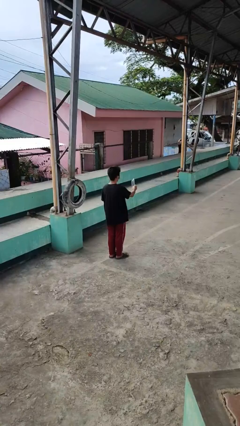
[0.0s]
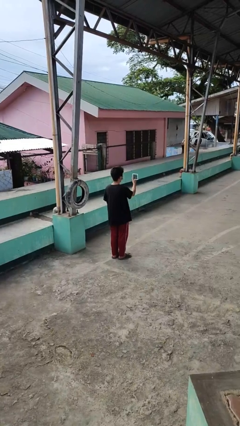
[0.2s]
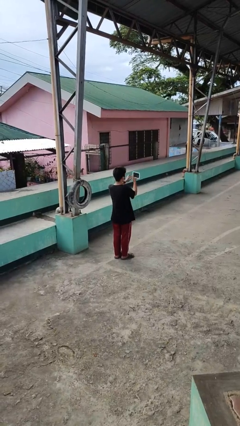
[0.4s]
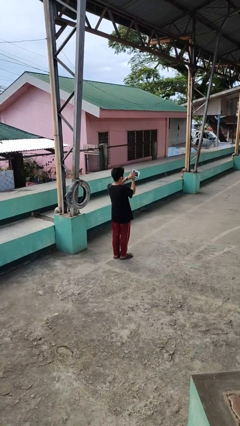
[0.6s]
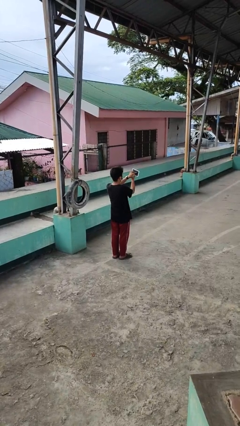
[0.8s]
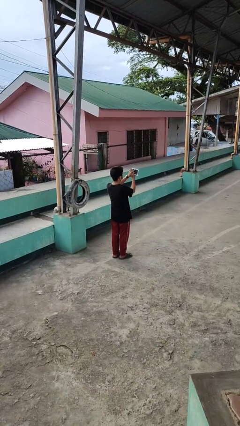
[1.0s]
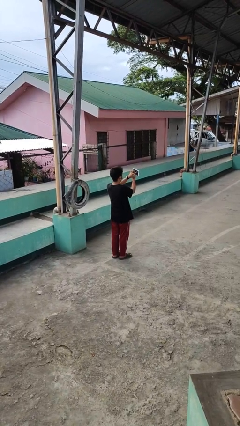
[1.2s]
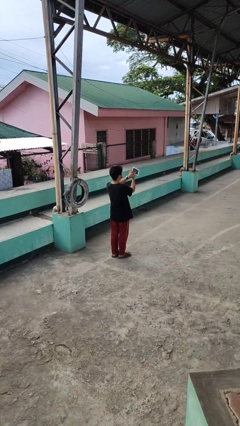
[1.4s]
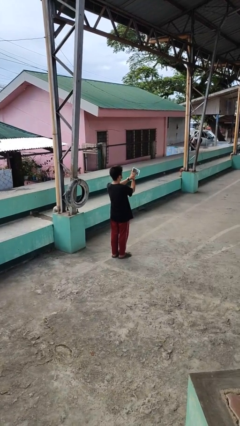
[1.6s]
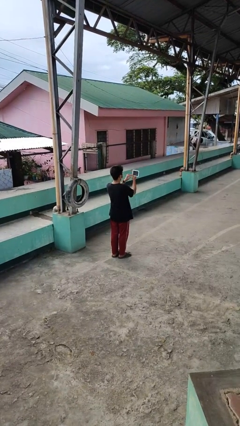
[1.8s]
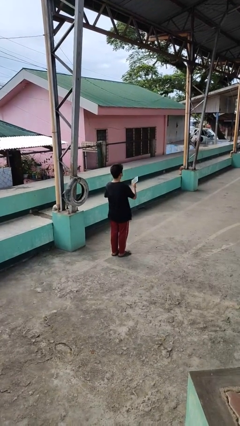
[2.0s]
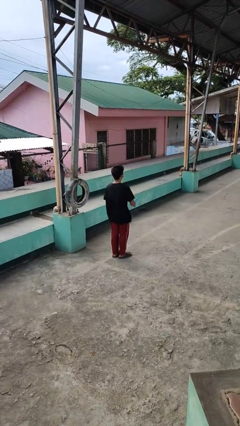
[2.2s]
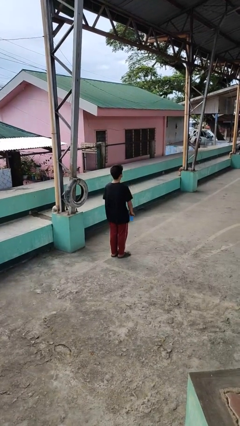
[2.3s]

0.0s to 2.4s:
person interacts with tablet

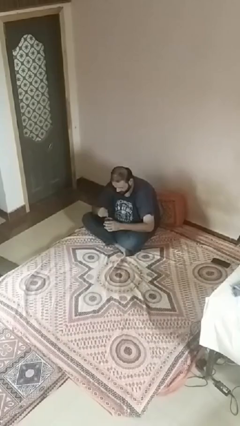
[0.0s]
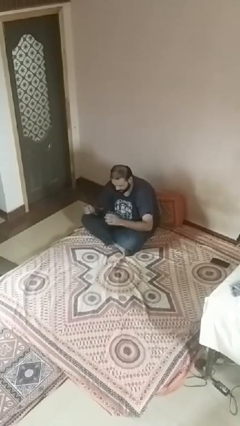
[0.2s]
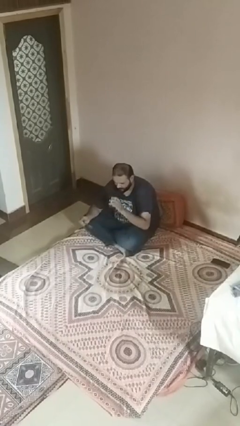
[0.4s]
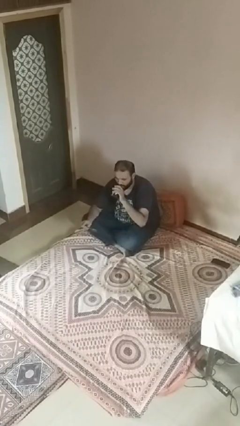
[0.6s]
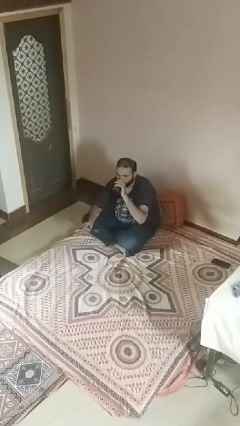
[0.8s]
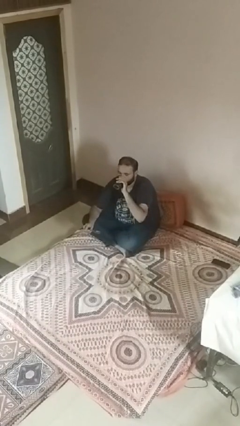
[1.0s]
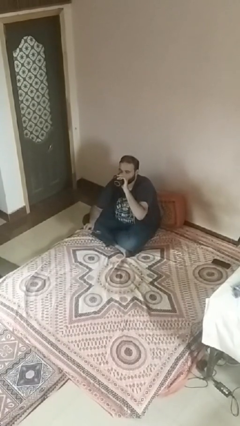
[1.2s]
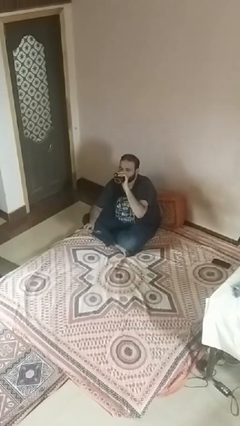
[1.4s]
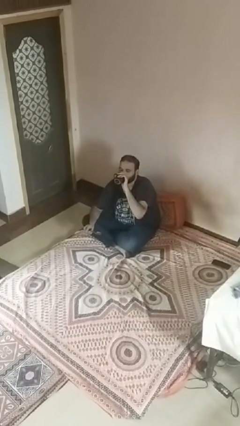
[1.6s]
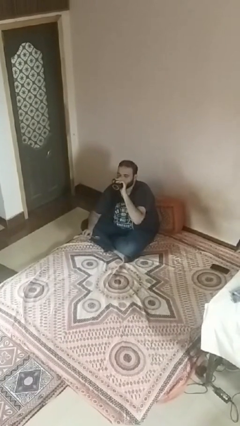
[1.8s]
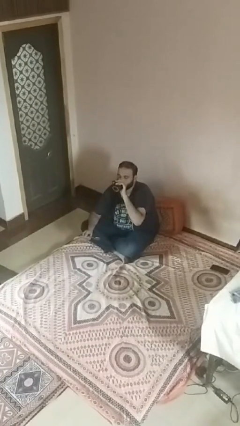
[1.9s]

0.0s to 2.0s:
person drinks from mug

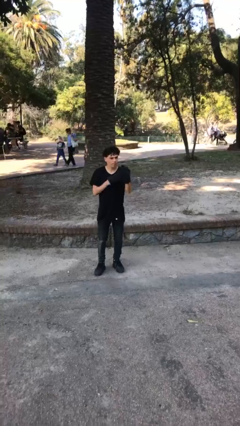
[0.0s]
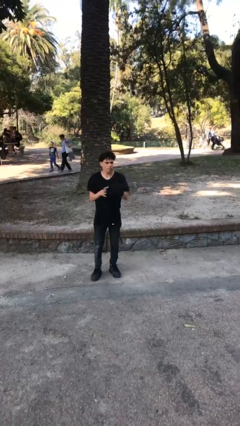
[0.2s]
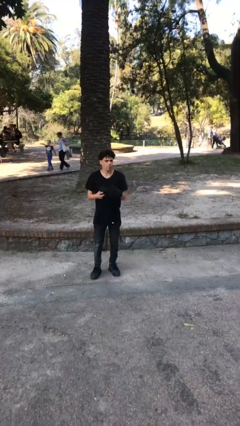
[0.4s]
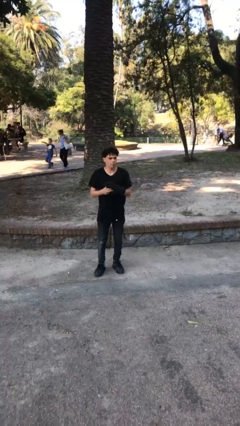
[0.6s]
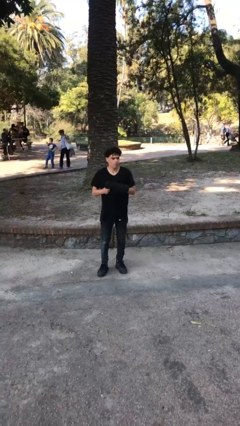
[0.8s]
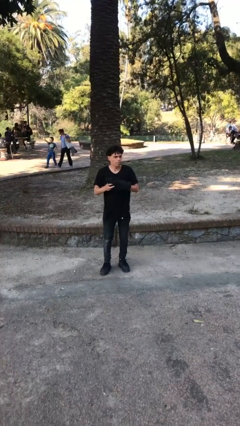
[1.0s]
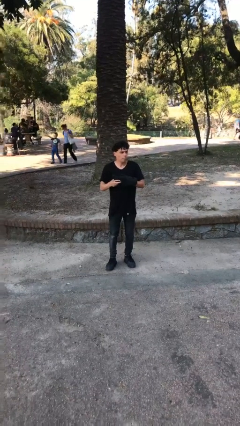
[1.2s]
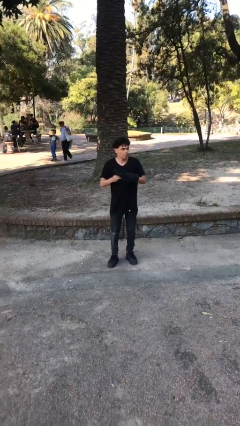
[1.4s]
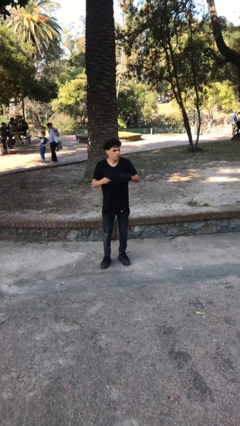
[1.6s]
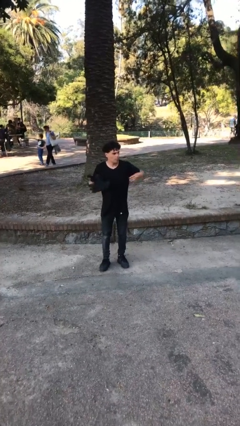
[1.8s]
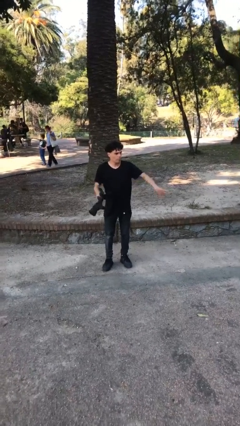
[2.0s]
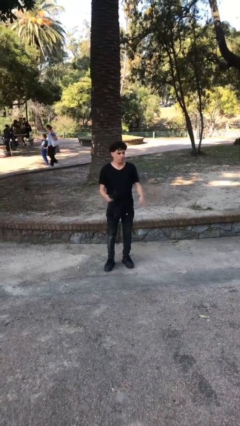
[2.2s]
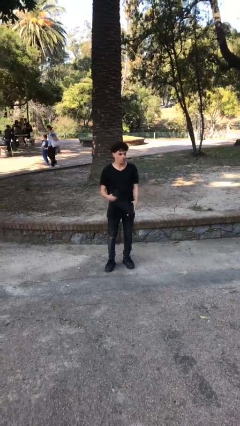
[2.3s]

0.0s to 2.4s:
person takes off gloves

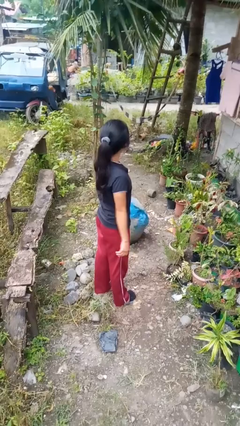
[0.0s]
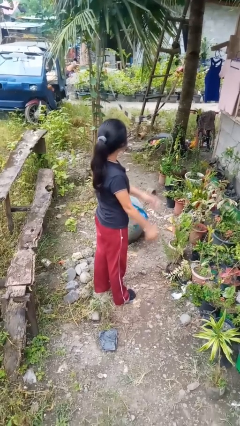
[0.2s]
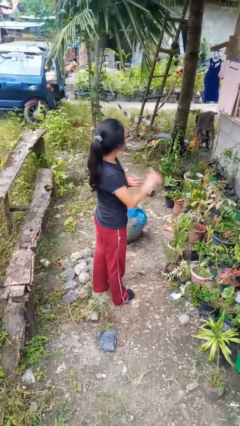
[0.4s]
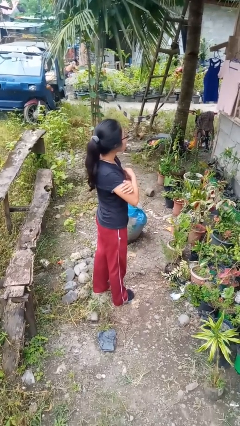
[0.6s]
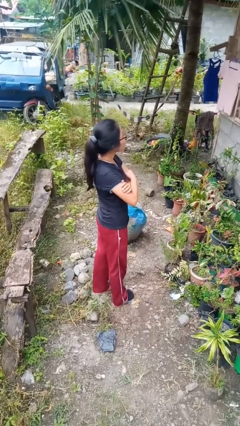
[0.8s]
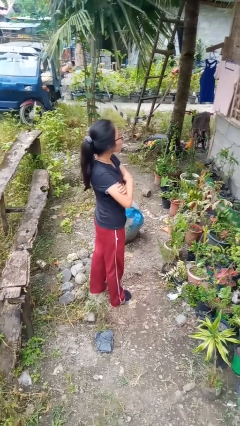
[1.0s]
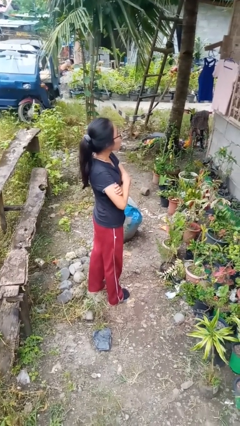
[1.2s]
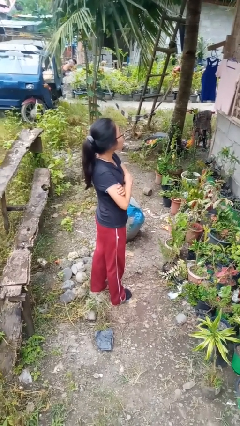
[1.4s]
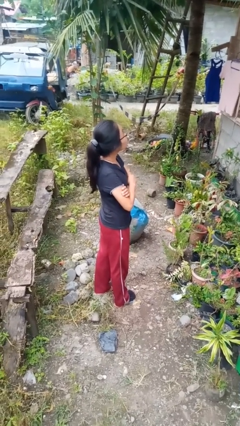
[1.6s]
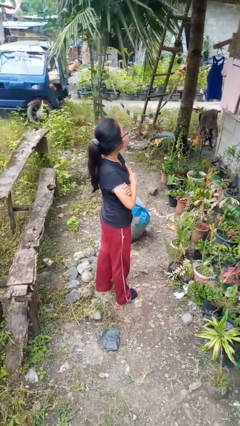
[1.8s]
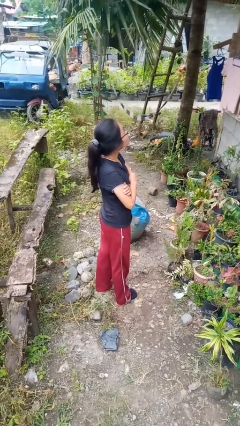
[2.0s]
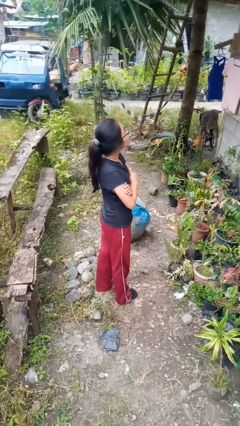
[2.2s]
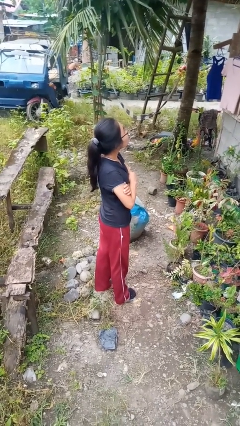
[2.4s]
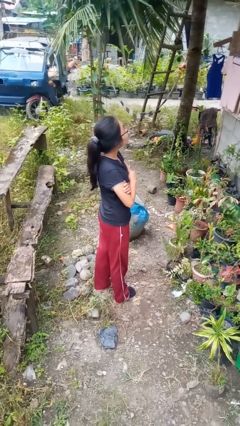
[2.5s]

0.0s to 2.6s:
person crosses arms

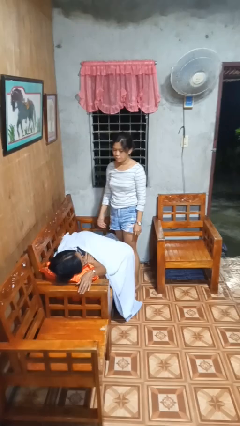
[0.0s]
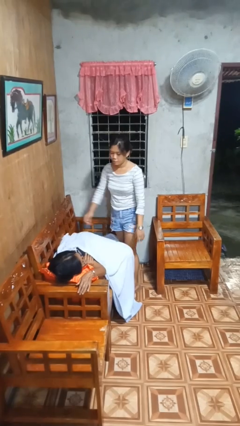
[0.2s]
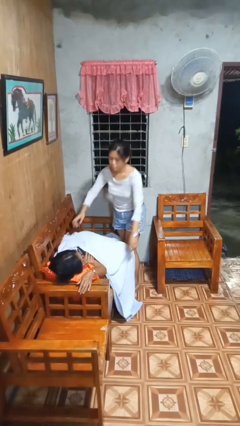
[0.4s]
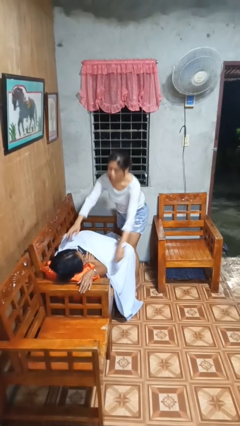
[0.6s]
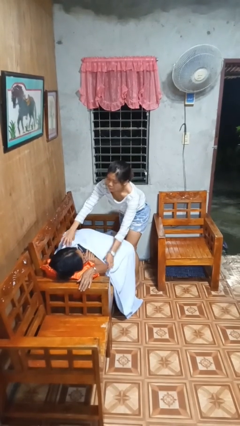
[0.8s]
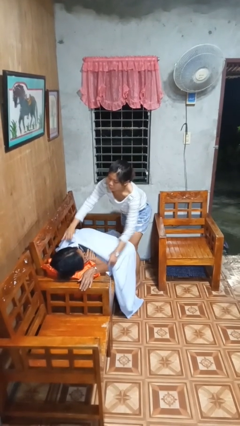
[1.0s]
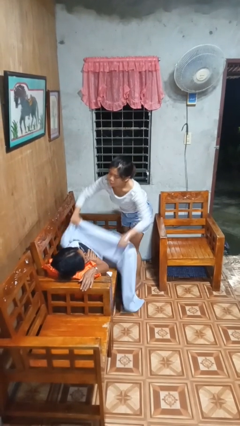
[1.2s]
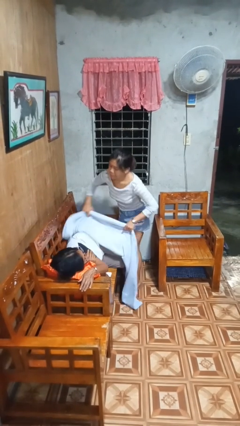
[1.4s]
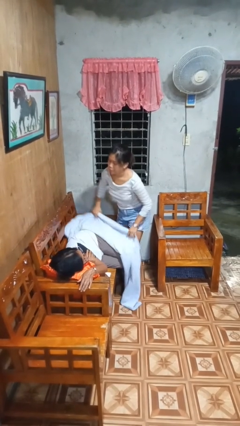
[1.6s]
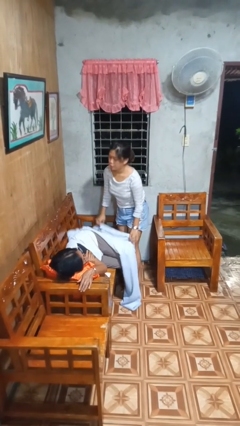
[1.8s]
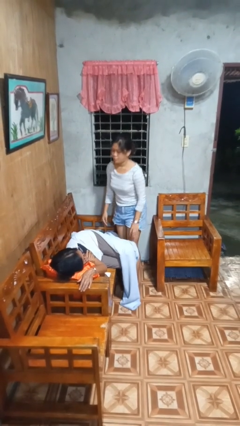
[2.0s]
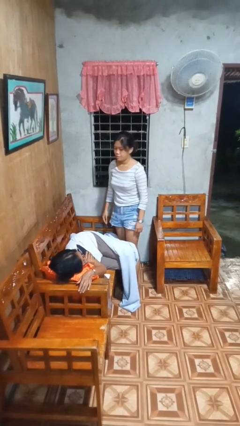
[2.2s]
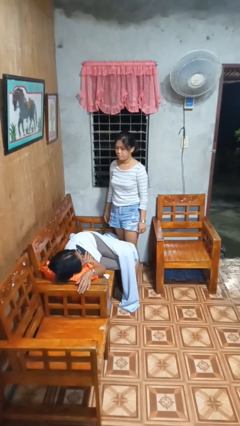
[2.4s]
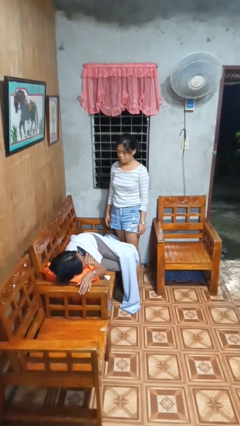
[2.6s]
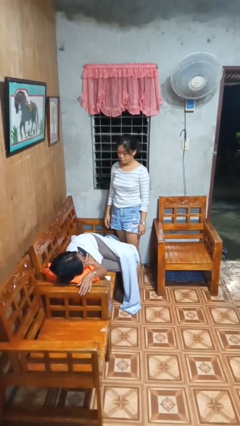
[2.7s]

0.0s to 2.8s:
person uncovers friend with blanket

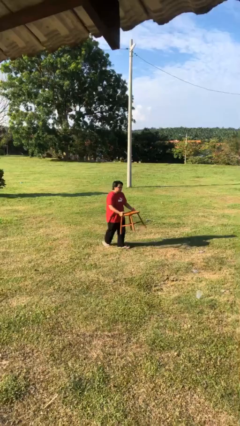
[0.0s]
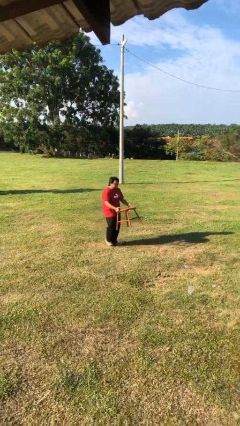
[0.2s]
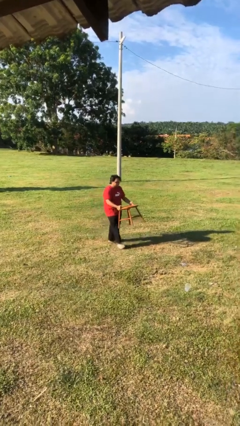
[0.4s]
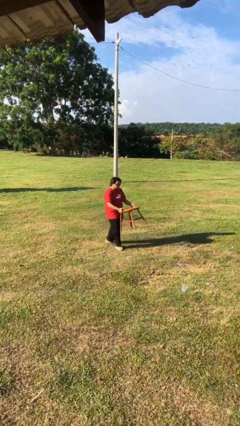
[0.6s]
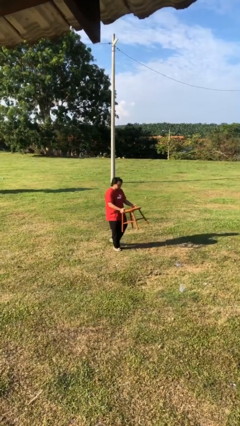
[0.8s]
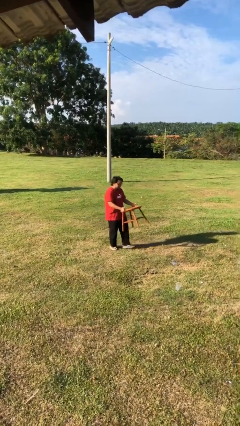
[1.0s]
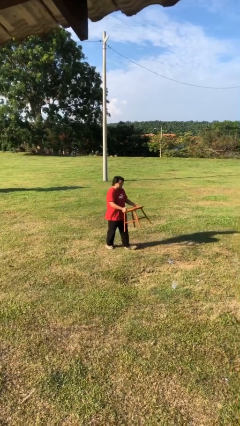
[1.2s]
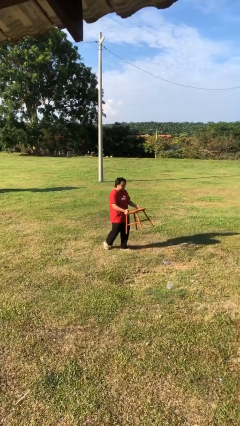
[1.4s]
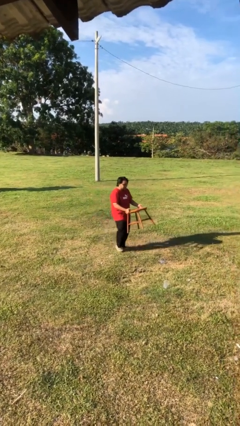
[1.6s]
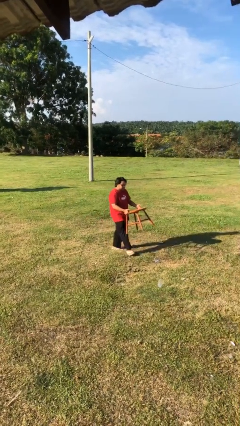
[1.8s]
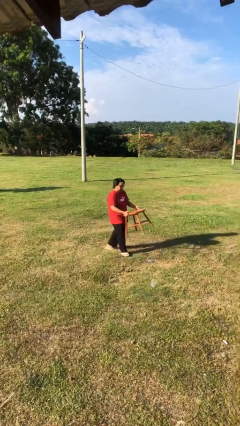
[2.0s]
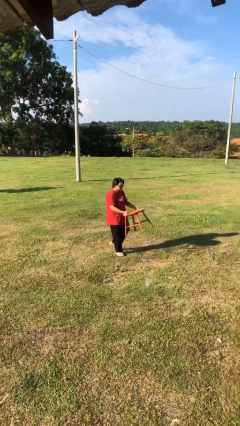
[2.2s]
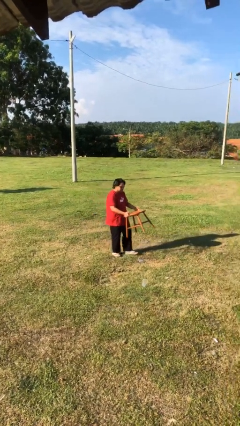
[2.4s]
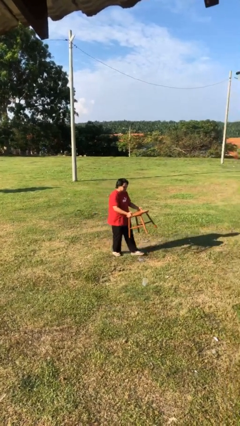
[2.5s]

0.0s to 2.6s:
person carries heavy object

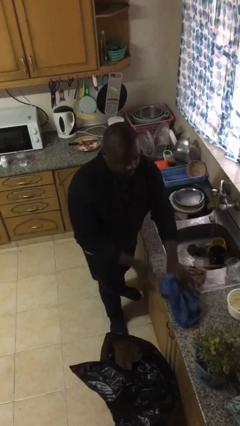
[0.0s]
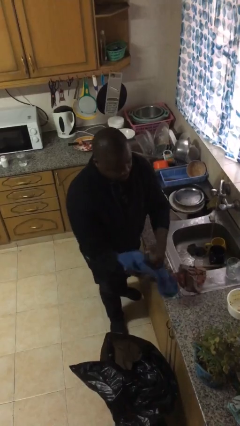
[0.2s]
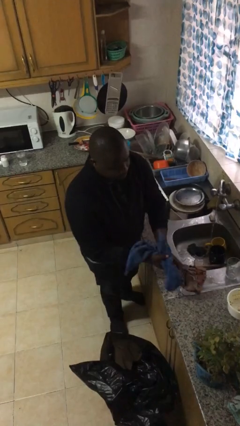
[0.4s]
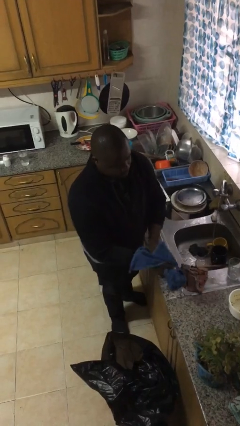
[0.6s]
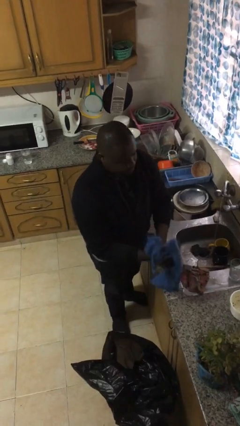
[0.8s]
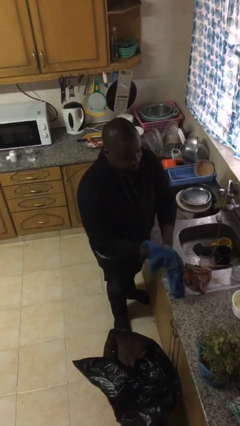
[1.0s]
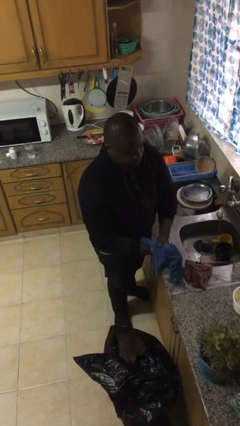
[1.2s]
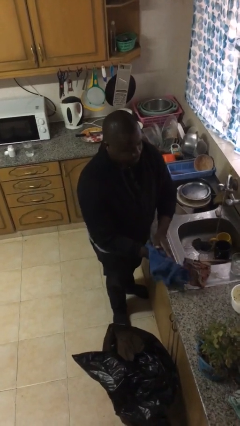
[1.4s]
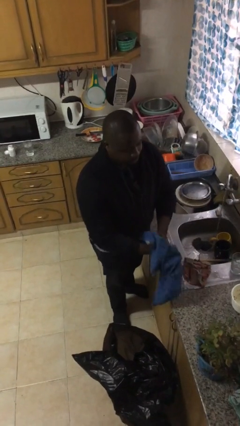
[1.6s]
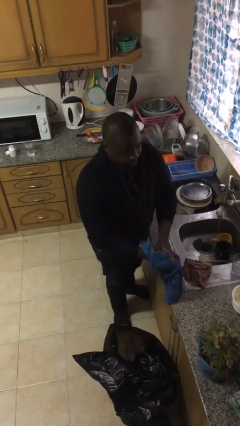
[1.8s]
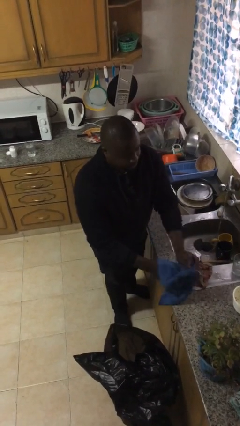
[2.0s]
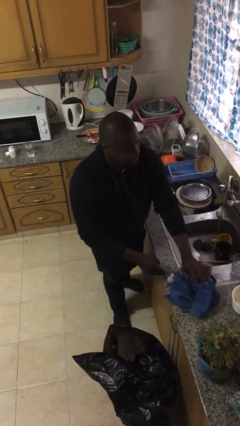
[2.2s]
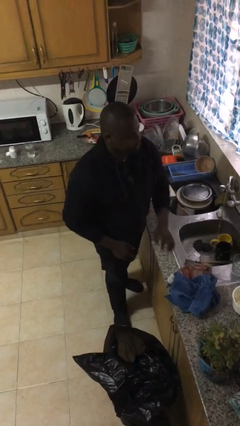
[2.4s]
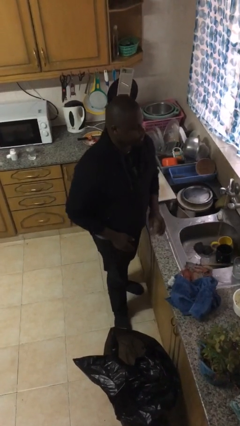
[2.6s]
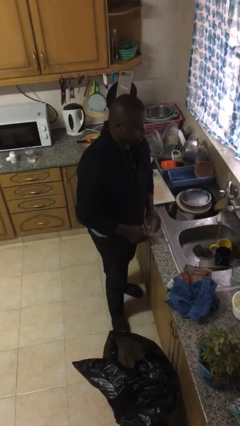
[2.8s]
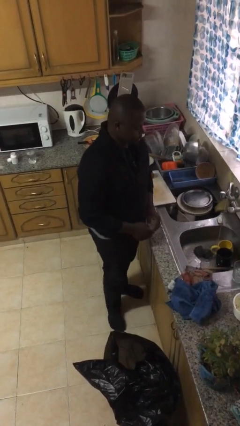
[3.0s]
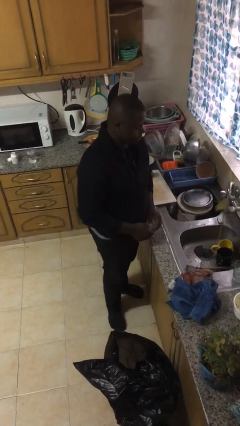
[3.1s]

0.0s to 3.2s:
person dries hands with towel
